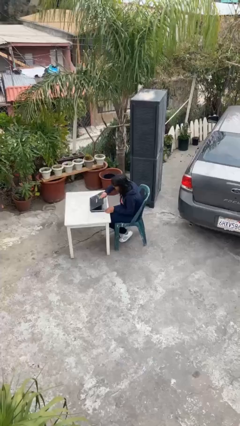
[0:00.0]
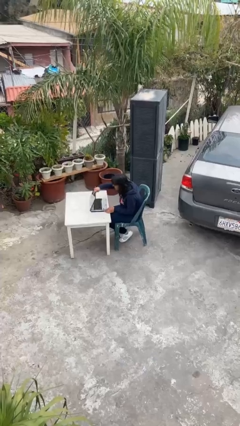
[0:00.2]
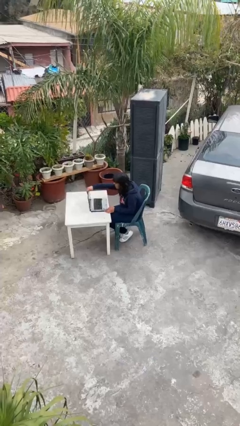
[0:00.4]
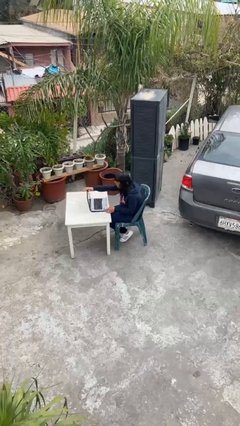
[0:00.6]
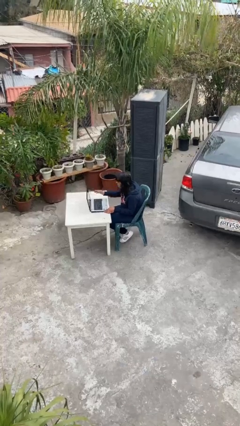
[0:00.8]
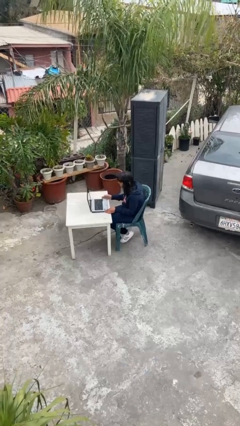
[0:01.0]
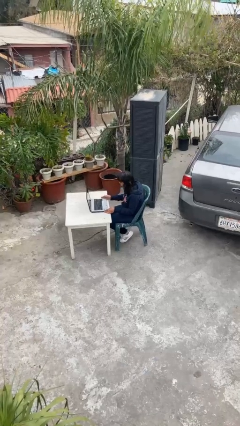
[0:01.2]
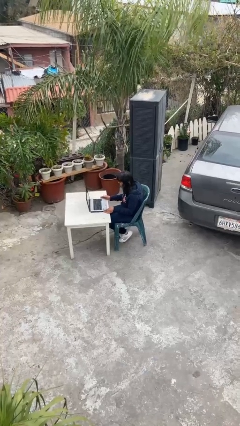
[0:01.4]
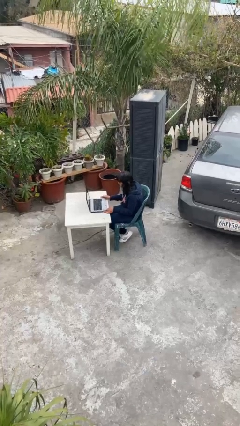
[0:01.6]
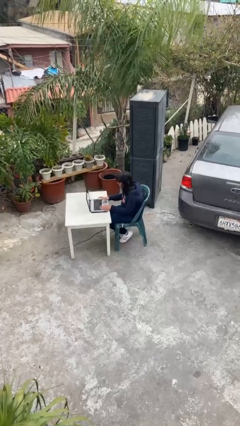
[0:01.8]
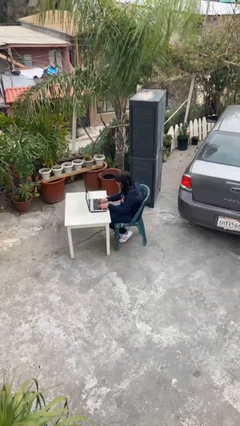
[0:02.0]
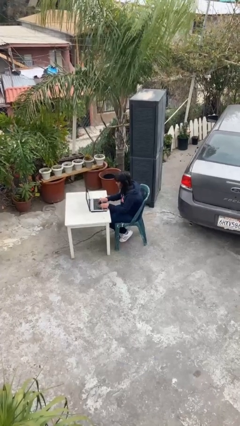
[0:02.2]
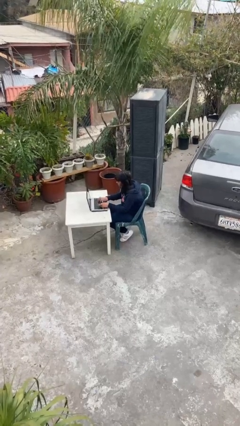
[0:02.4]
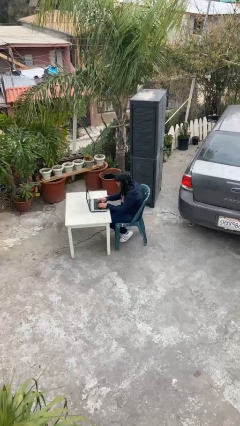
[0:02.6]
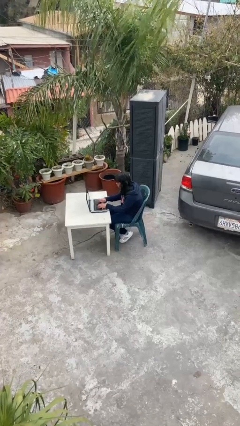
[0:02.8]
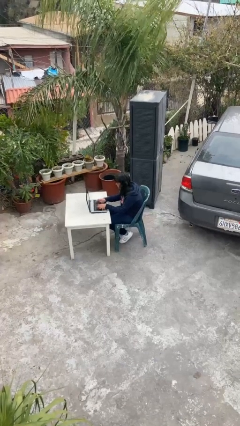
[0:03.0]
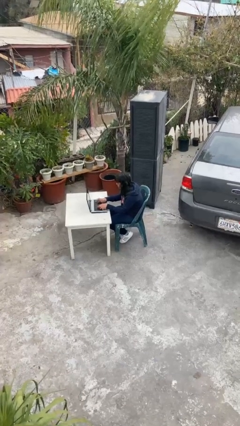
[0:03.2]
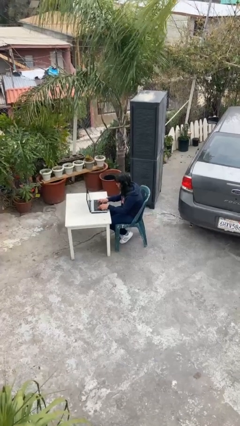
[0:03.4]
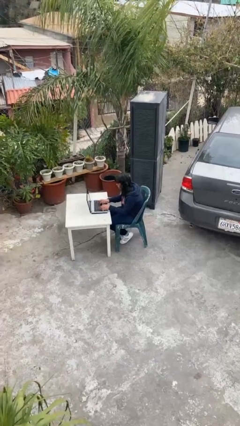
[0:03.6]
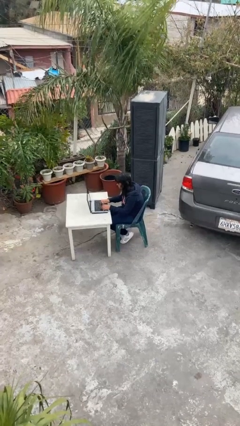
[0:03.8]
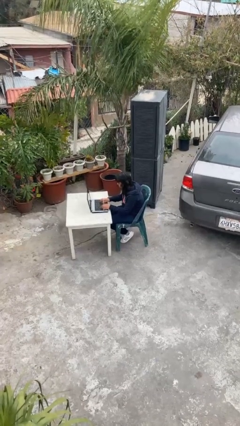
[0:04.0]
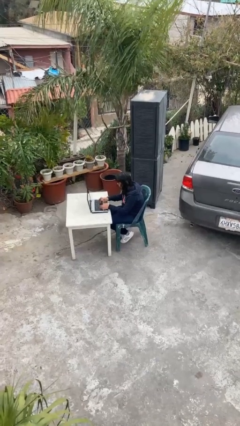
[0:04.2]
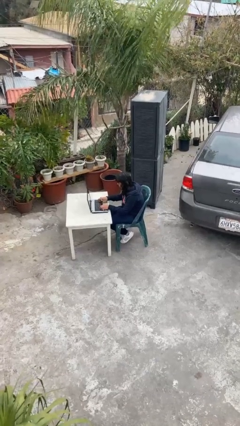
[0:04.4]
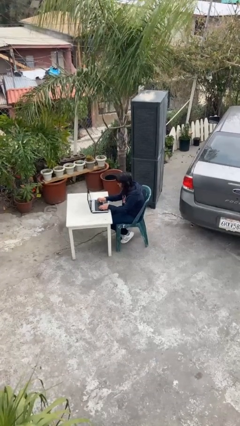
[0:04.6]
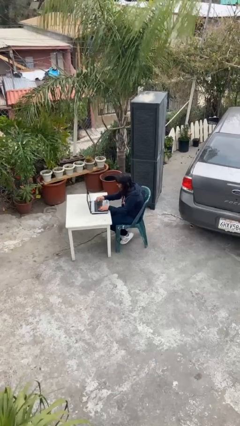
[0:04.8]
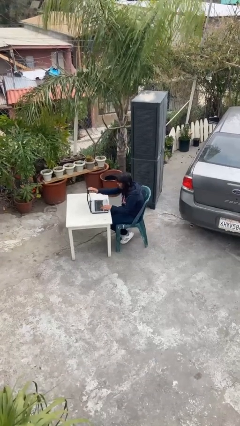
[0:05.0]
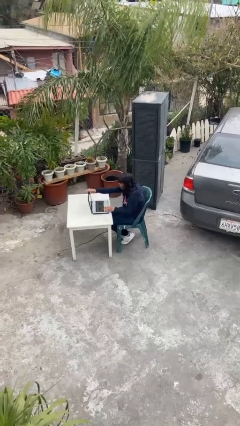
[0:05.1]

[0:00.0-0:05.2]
person interacts with laptop

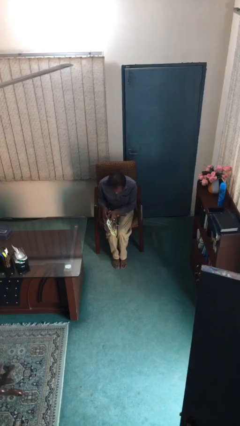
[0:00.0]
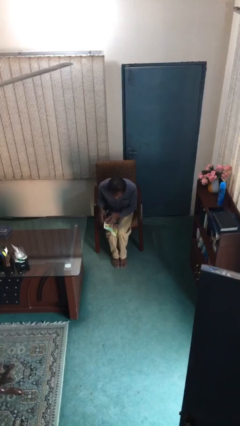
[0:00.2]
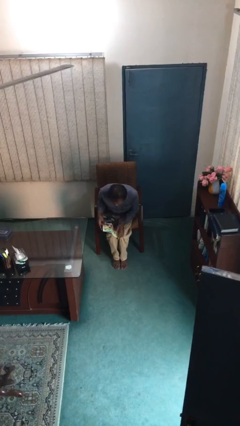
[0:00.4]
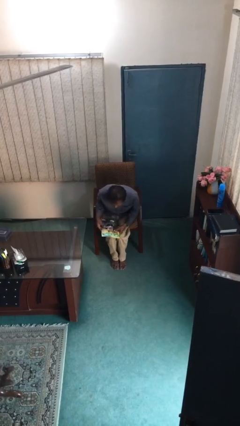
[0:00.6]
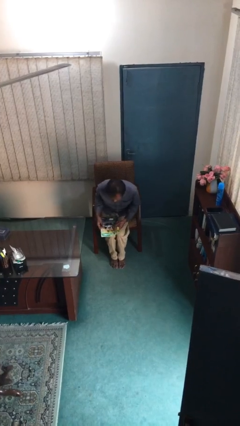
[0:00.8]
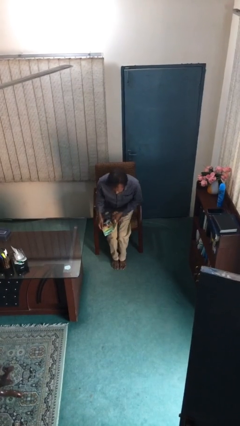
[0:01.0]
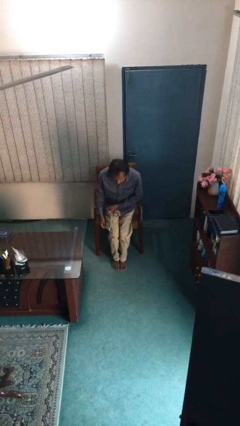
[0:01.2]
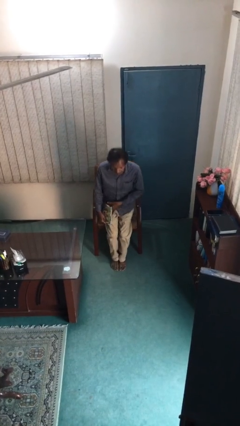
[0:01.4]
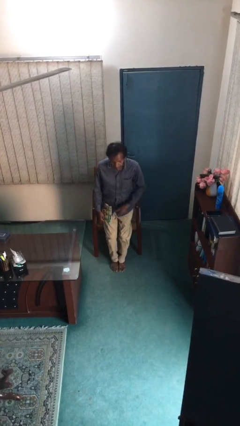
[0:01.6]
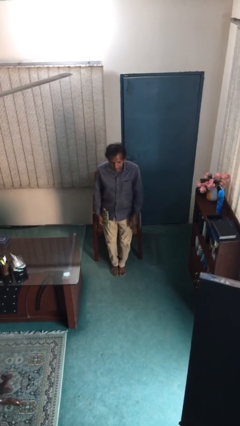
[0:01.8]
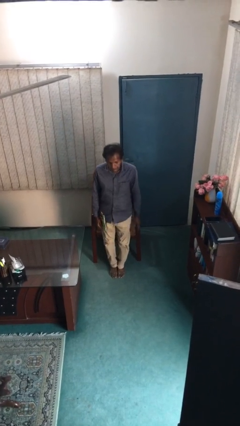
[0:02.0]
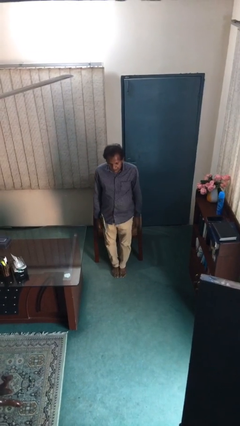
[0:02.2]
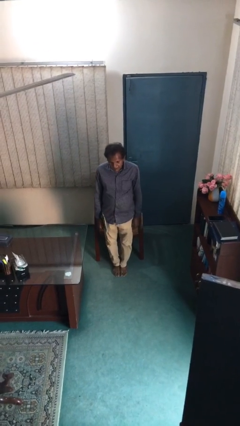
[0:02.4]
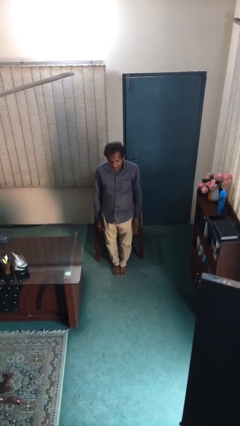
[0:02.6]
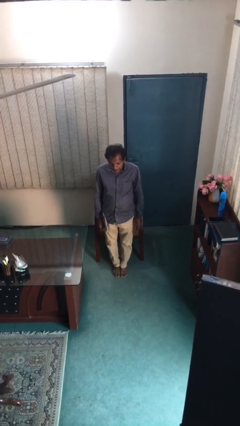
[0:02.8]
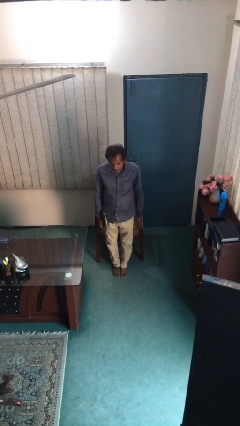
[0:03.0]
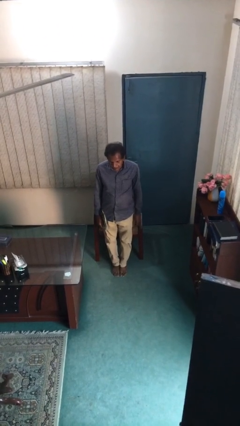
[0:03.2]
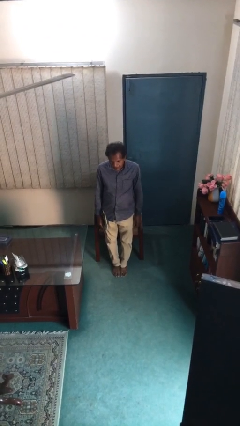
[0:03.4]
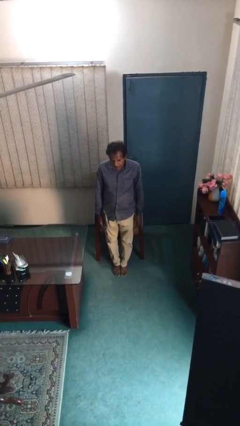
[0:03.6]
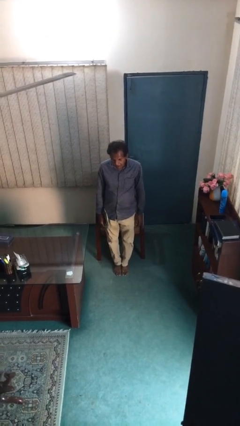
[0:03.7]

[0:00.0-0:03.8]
person stands up

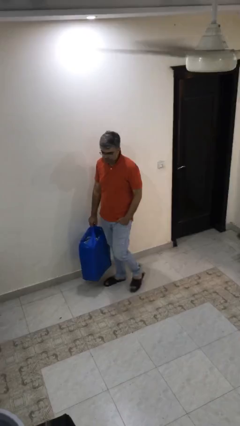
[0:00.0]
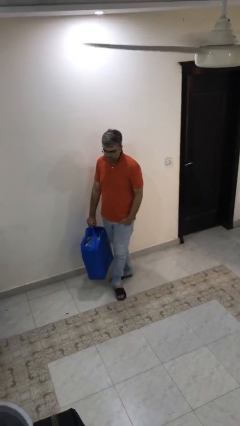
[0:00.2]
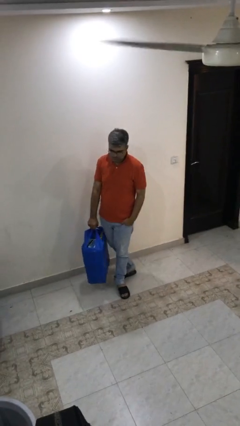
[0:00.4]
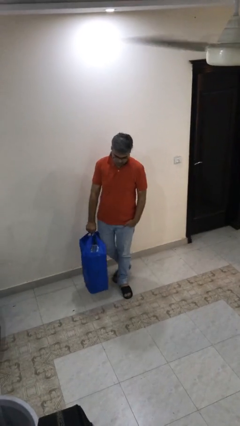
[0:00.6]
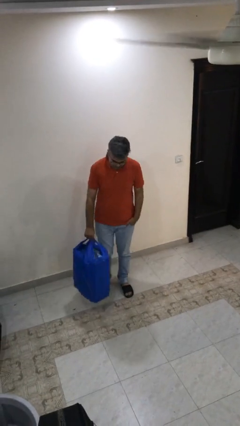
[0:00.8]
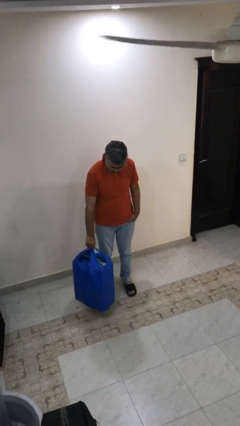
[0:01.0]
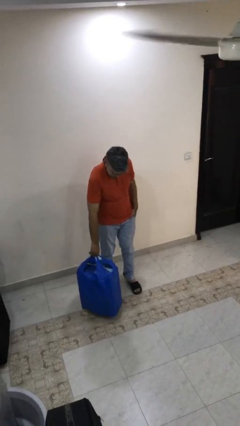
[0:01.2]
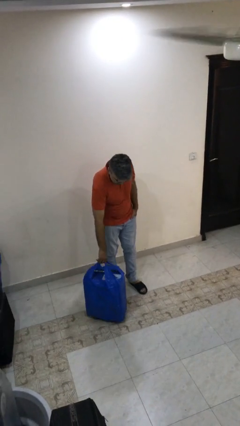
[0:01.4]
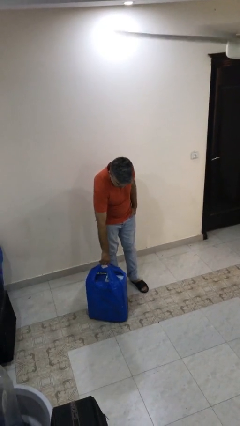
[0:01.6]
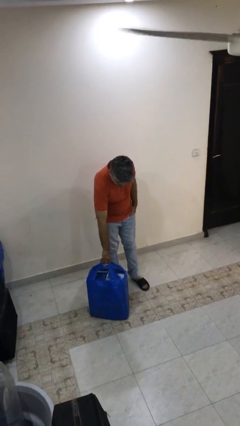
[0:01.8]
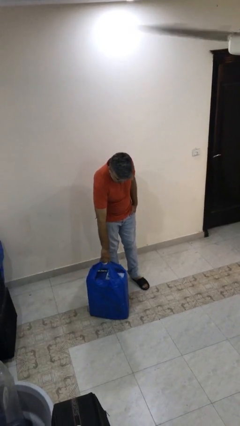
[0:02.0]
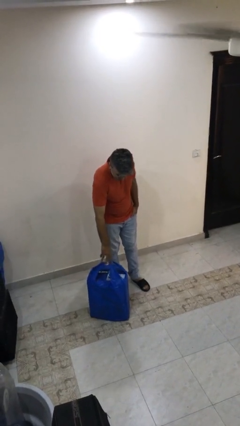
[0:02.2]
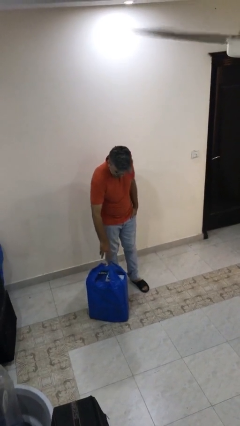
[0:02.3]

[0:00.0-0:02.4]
person puts down object on floor

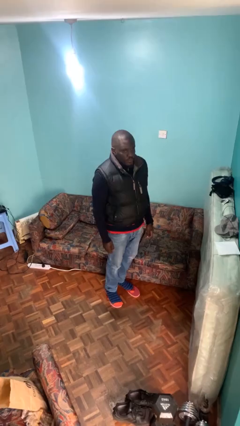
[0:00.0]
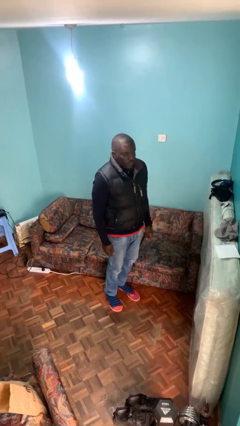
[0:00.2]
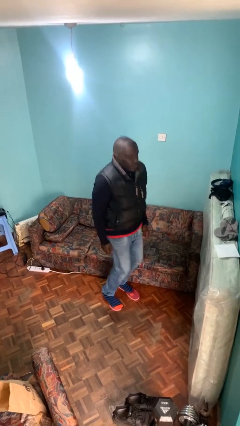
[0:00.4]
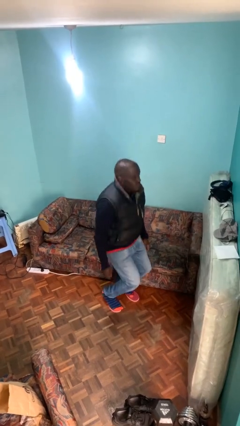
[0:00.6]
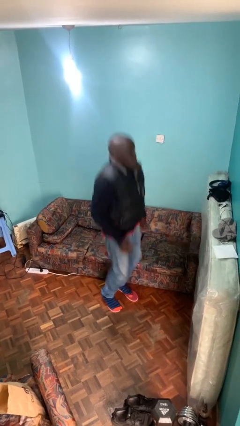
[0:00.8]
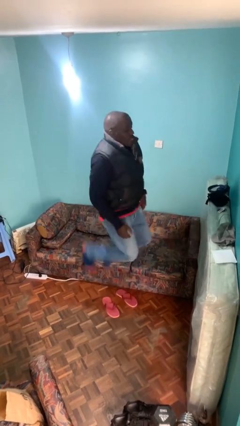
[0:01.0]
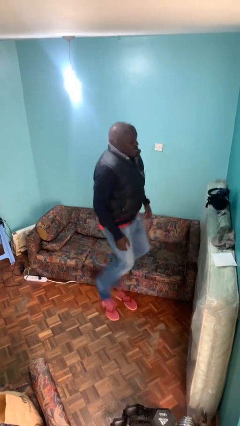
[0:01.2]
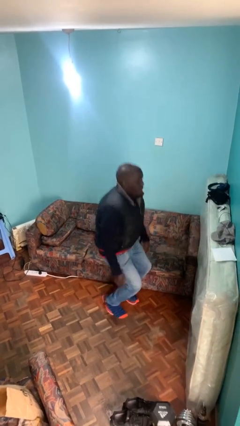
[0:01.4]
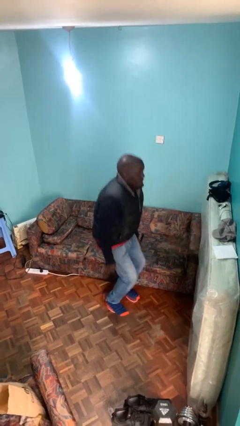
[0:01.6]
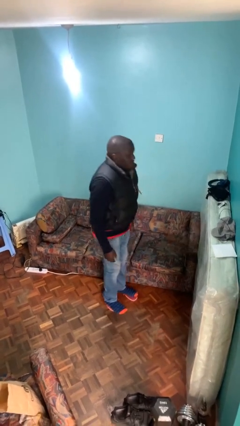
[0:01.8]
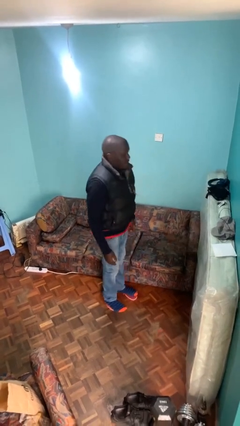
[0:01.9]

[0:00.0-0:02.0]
person jumps

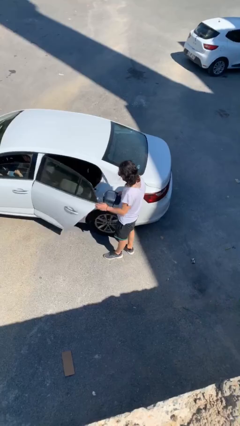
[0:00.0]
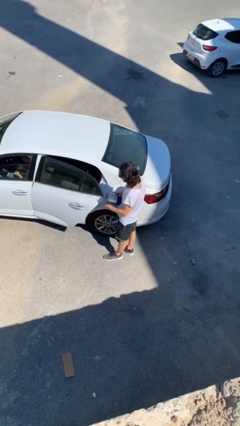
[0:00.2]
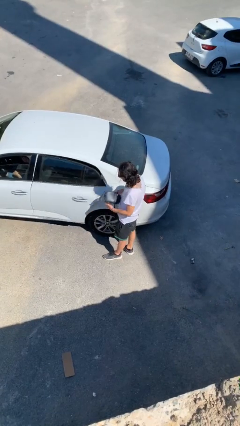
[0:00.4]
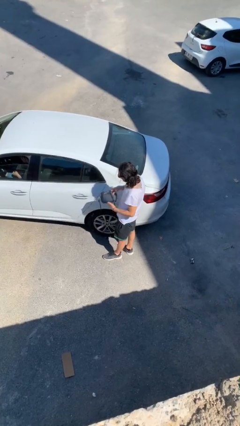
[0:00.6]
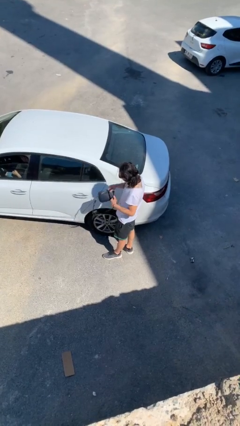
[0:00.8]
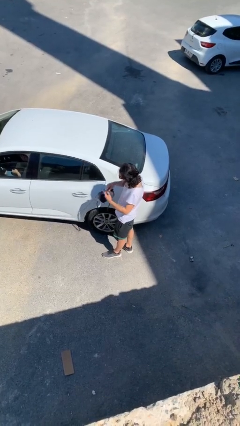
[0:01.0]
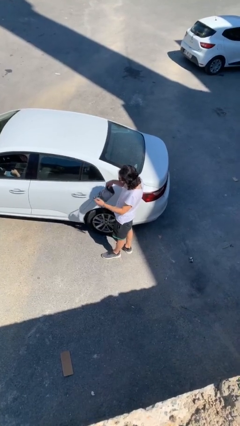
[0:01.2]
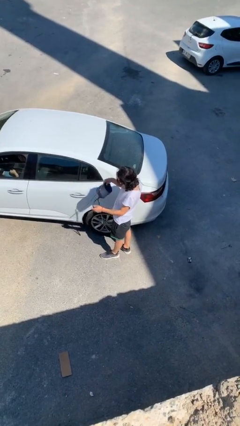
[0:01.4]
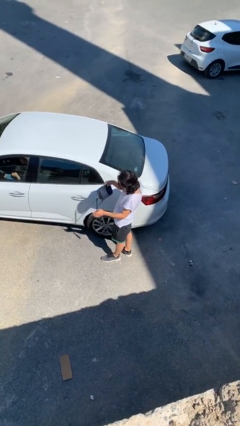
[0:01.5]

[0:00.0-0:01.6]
person closes car door

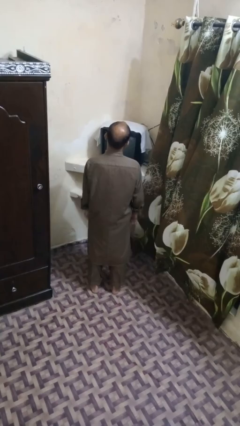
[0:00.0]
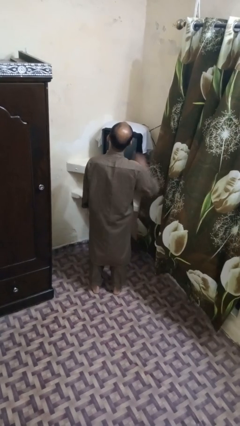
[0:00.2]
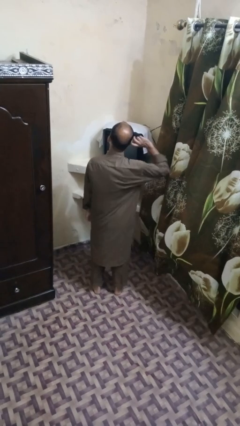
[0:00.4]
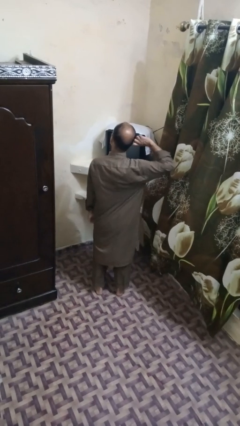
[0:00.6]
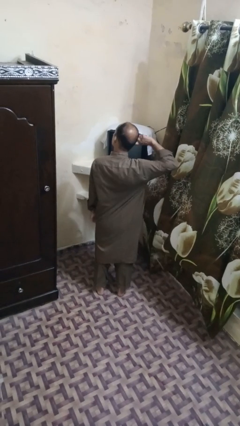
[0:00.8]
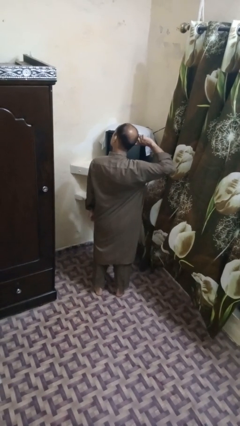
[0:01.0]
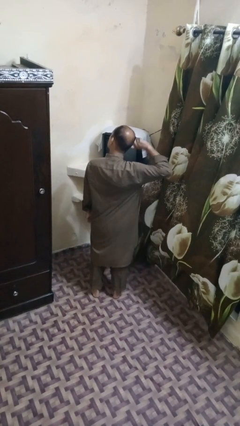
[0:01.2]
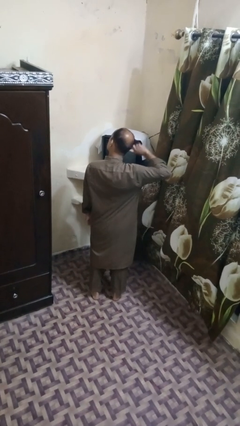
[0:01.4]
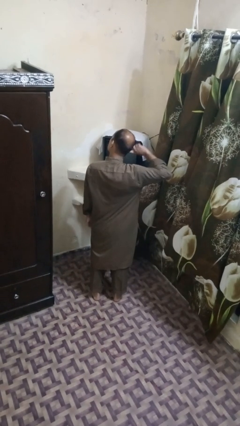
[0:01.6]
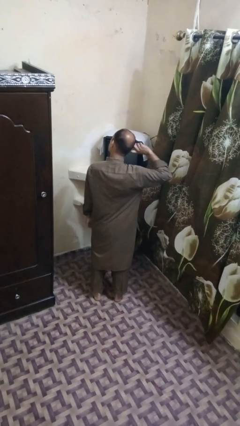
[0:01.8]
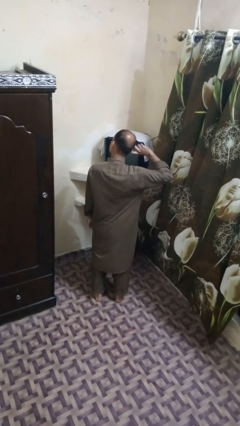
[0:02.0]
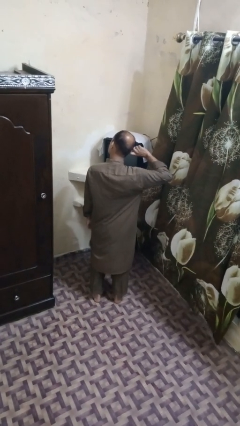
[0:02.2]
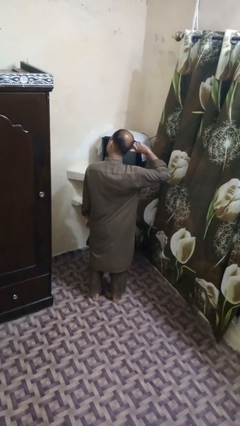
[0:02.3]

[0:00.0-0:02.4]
person puts fingers in ear

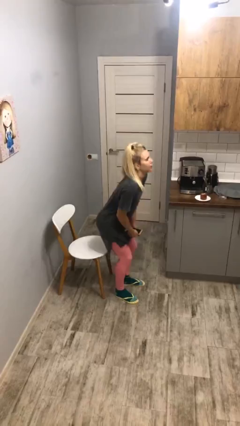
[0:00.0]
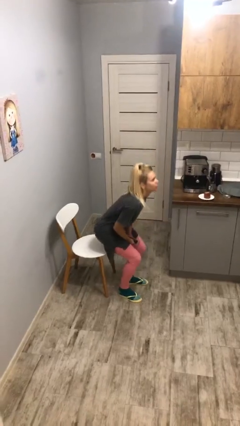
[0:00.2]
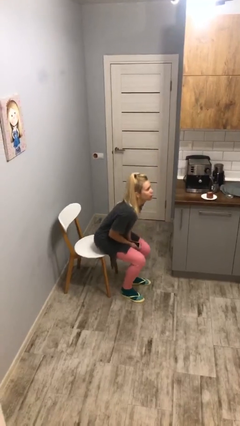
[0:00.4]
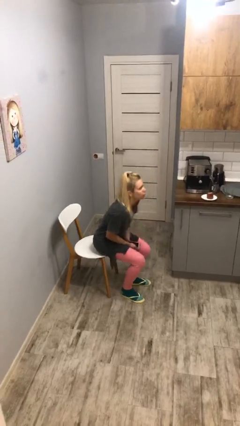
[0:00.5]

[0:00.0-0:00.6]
person sits down
